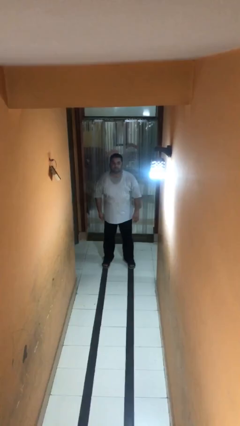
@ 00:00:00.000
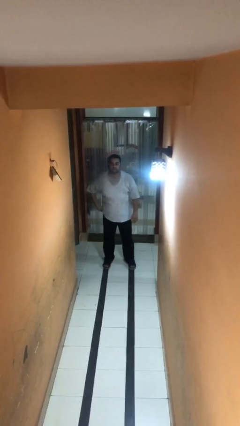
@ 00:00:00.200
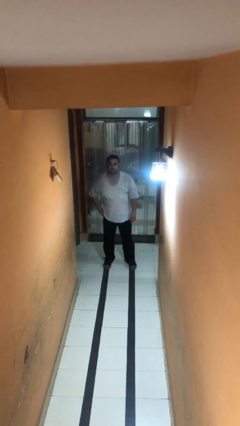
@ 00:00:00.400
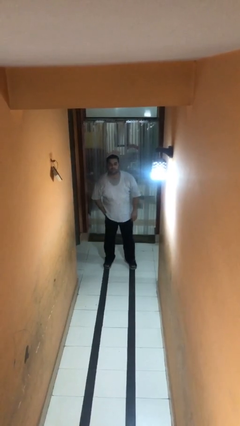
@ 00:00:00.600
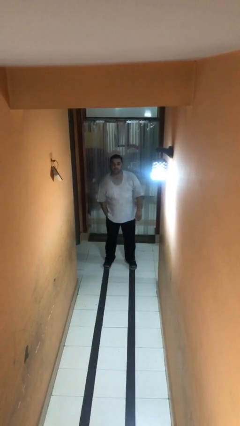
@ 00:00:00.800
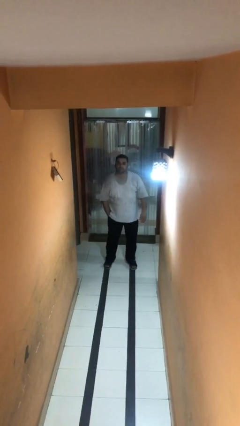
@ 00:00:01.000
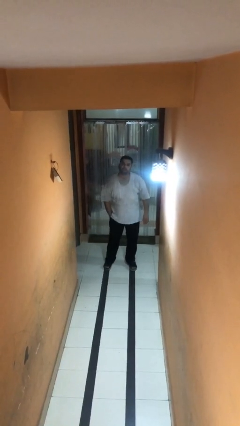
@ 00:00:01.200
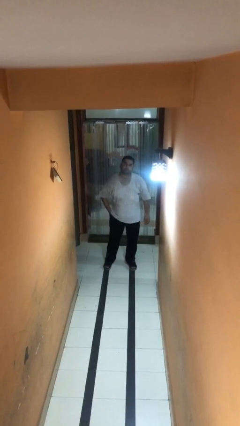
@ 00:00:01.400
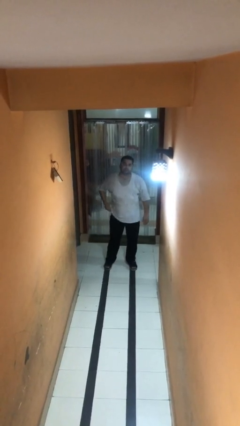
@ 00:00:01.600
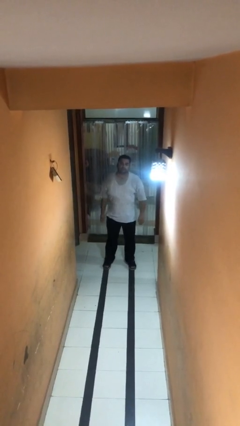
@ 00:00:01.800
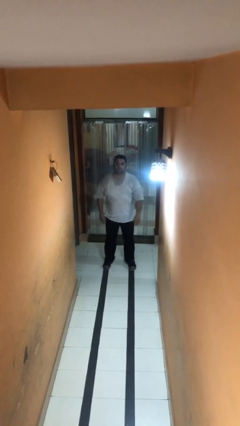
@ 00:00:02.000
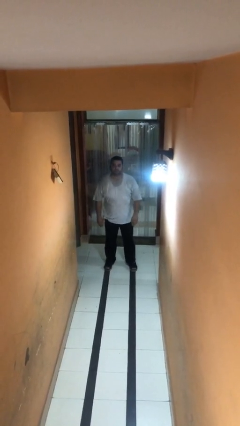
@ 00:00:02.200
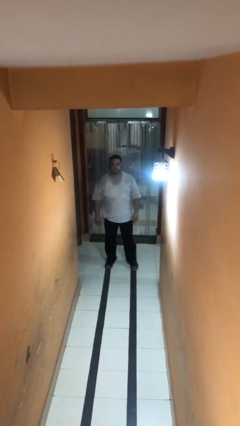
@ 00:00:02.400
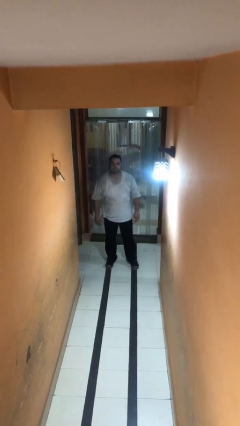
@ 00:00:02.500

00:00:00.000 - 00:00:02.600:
person puts hands in back pockets

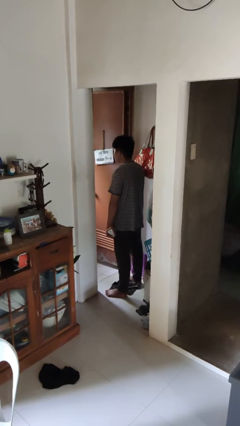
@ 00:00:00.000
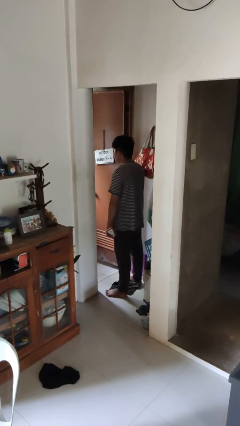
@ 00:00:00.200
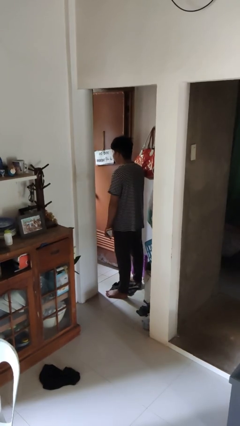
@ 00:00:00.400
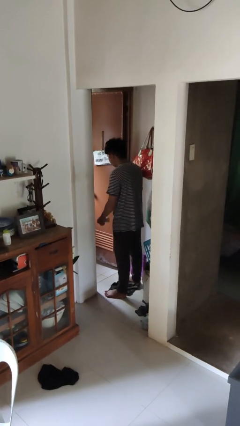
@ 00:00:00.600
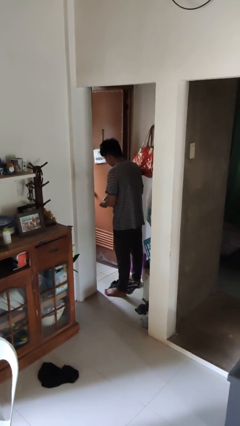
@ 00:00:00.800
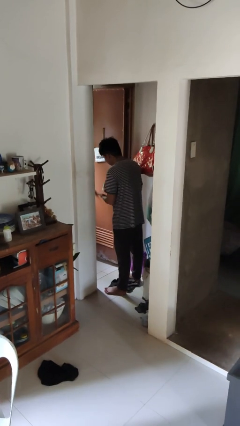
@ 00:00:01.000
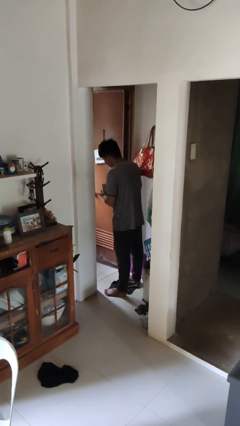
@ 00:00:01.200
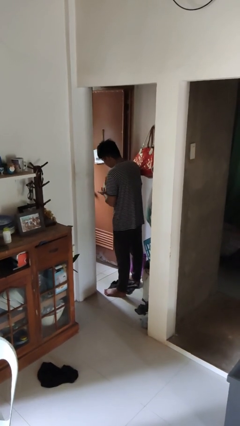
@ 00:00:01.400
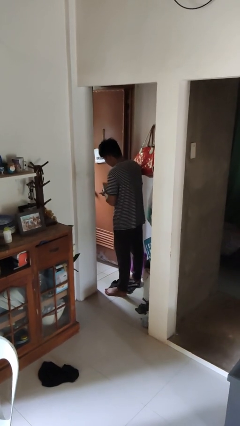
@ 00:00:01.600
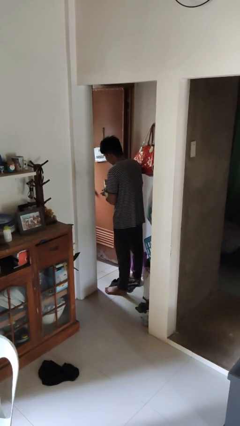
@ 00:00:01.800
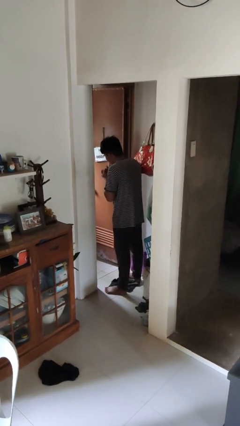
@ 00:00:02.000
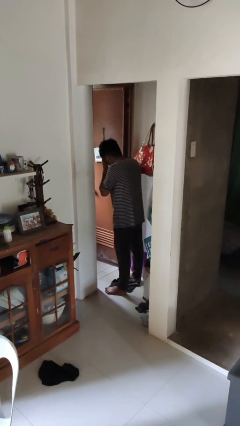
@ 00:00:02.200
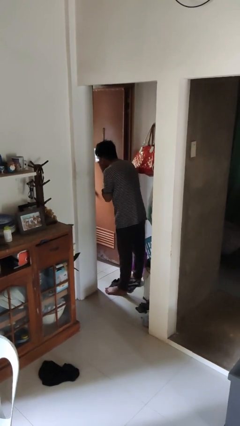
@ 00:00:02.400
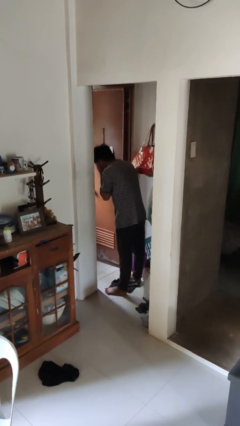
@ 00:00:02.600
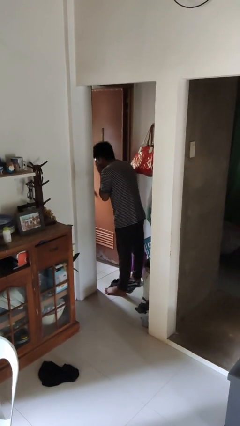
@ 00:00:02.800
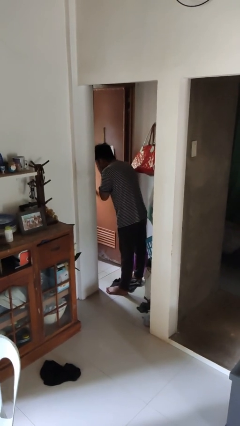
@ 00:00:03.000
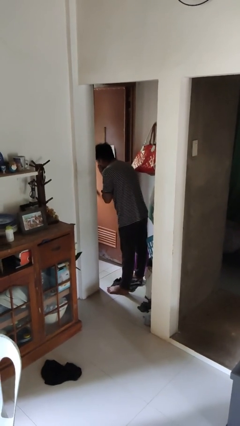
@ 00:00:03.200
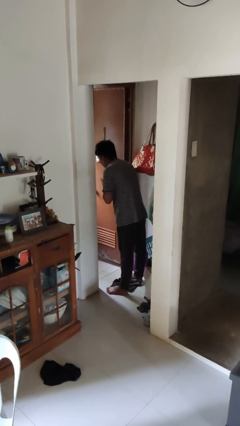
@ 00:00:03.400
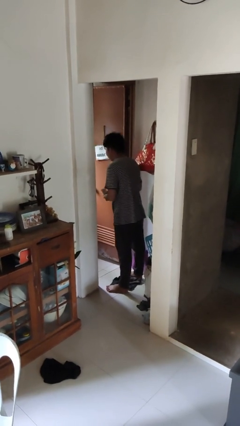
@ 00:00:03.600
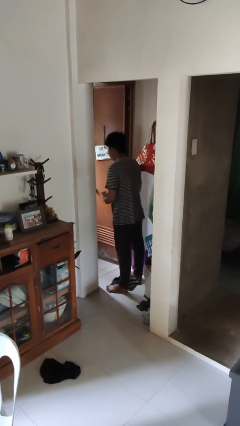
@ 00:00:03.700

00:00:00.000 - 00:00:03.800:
person applies facial moisturizer

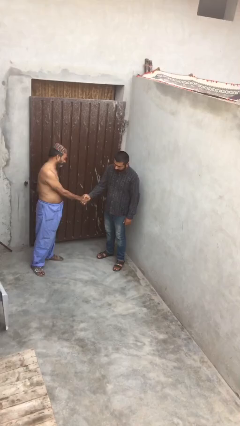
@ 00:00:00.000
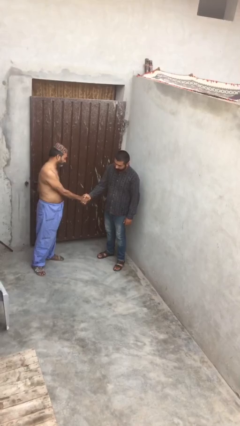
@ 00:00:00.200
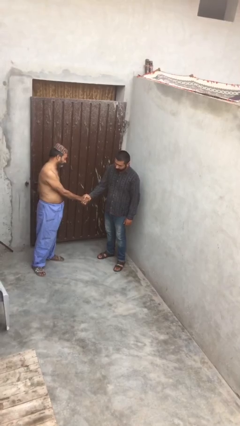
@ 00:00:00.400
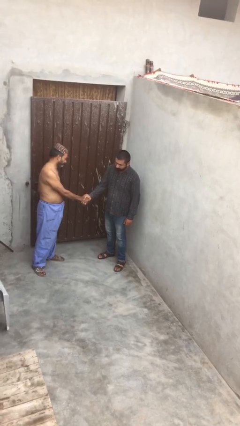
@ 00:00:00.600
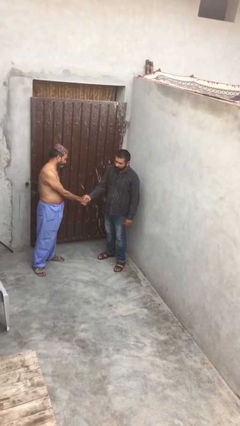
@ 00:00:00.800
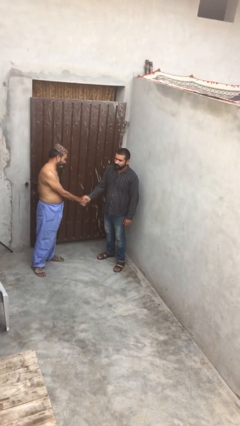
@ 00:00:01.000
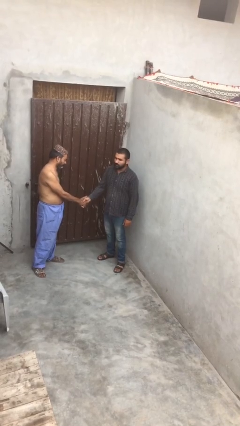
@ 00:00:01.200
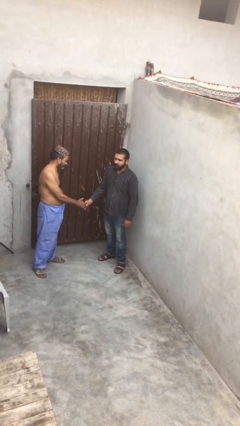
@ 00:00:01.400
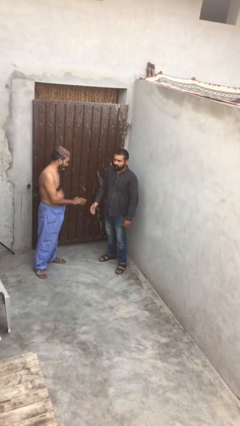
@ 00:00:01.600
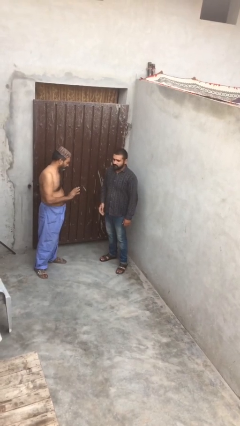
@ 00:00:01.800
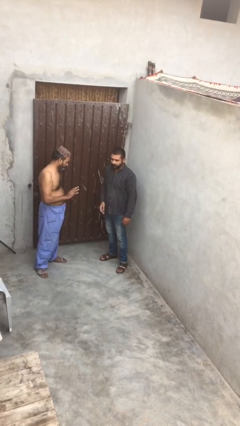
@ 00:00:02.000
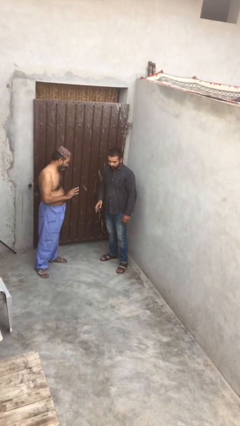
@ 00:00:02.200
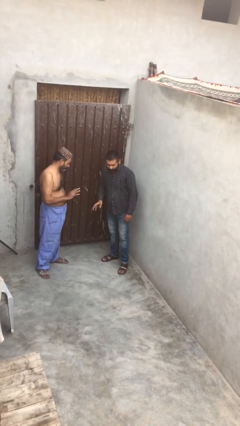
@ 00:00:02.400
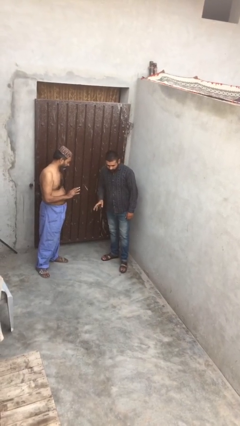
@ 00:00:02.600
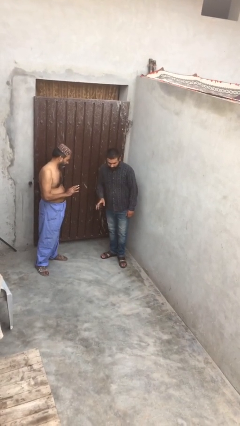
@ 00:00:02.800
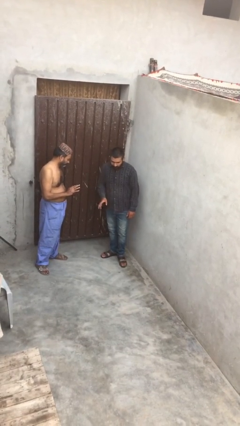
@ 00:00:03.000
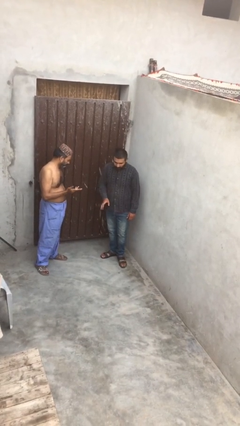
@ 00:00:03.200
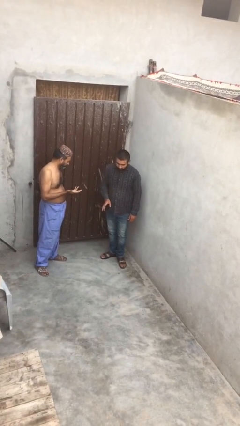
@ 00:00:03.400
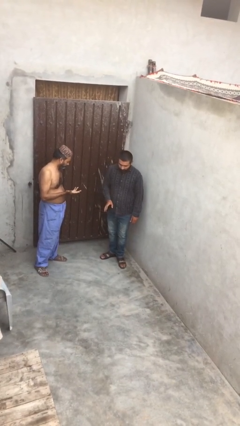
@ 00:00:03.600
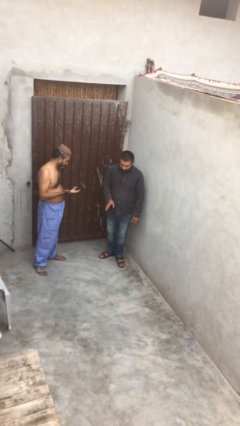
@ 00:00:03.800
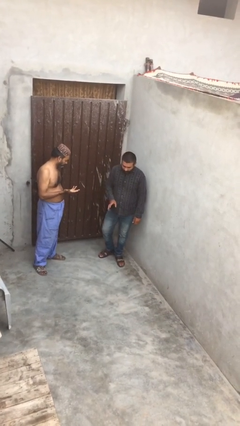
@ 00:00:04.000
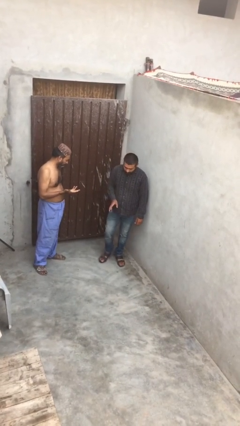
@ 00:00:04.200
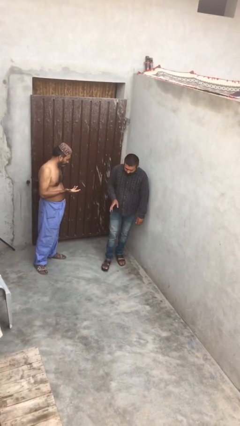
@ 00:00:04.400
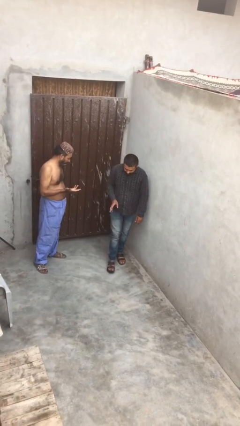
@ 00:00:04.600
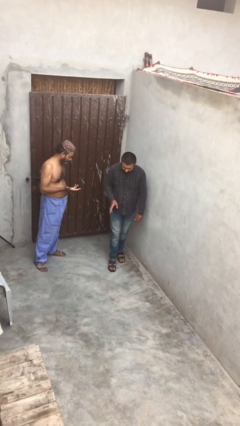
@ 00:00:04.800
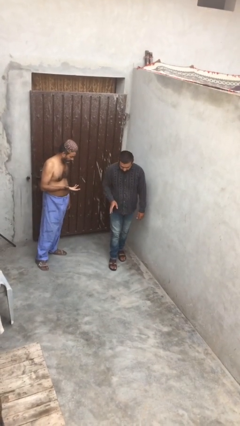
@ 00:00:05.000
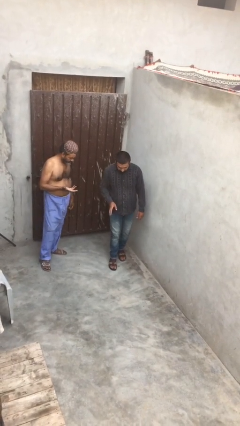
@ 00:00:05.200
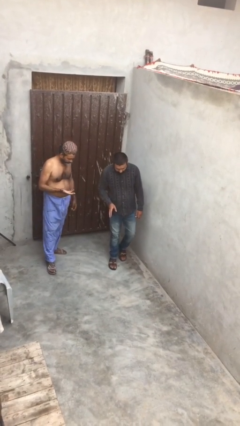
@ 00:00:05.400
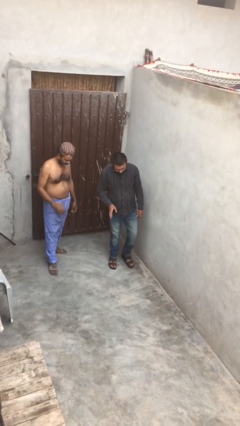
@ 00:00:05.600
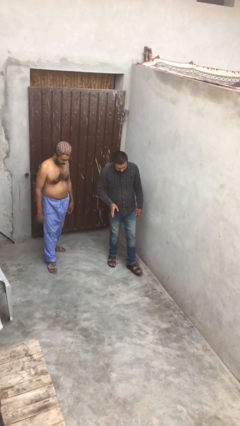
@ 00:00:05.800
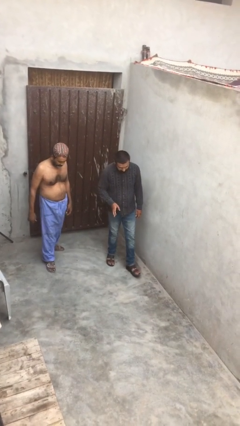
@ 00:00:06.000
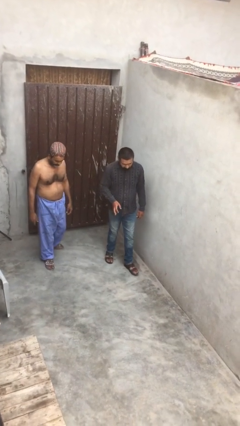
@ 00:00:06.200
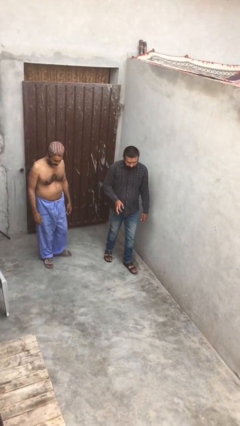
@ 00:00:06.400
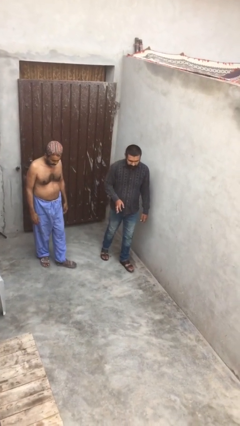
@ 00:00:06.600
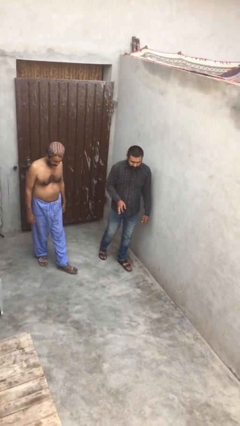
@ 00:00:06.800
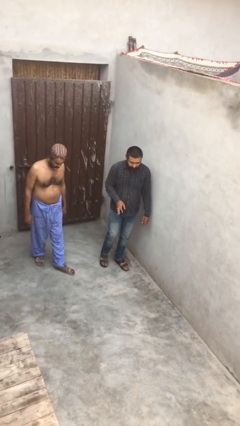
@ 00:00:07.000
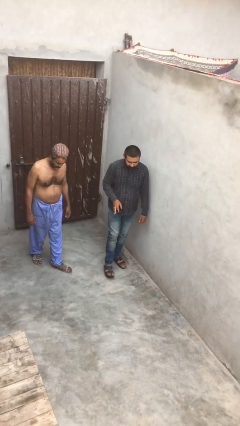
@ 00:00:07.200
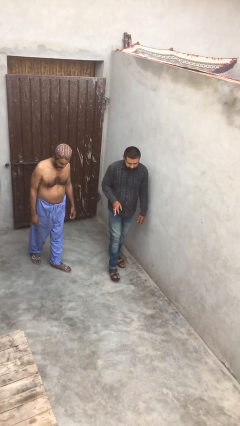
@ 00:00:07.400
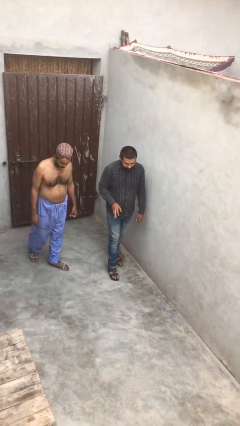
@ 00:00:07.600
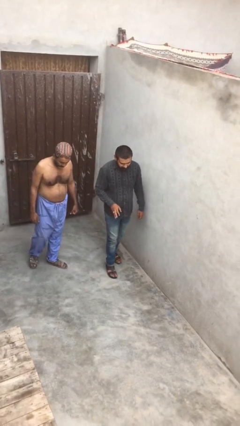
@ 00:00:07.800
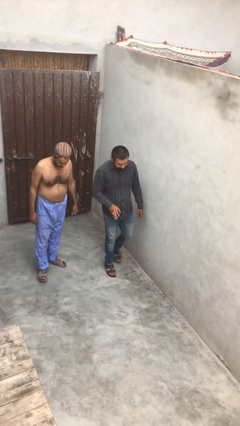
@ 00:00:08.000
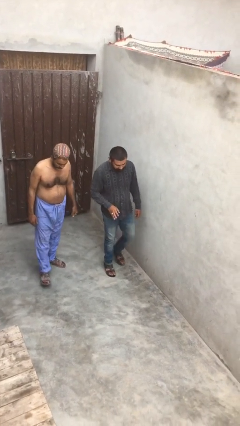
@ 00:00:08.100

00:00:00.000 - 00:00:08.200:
person talks to person

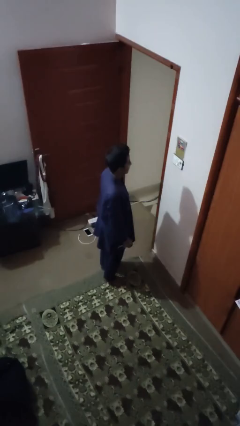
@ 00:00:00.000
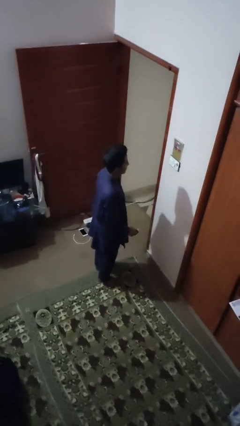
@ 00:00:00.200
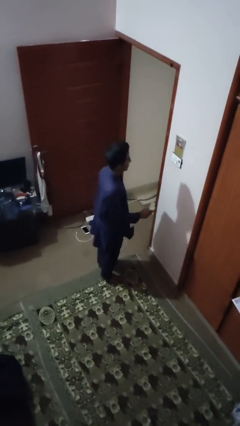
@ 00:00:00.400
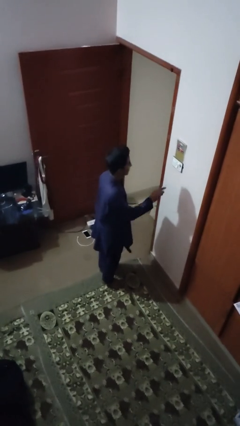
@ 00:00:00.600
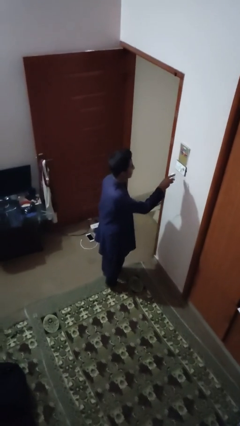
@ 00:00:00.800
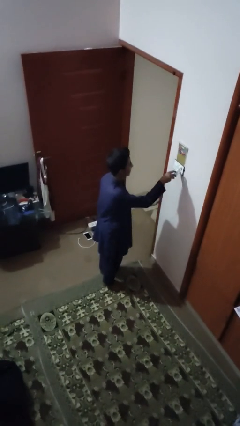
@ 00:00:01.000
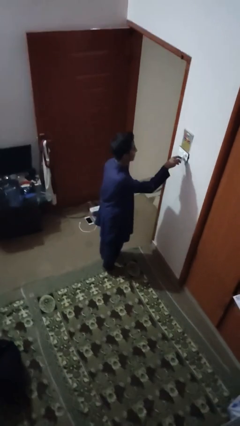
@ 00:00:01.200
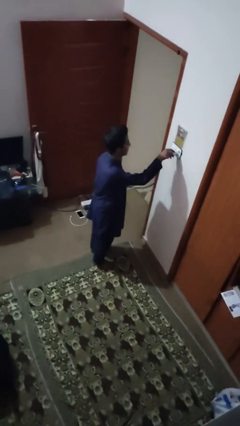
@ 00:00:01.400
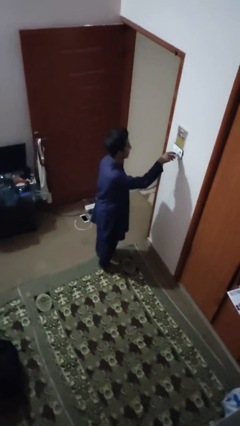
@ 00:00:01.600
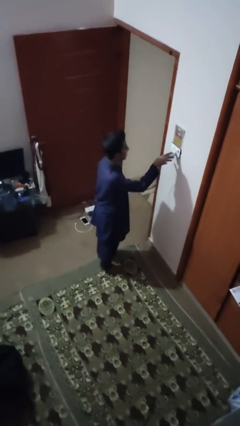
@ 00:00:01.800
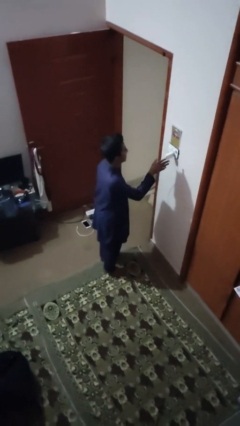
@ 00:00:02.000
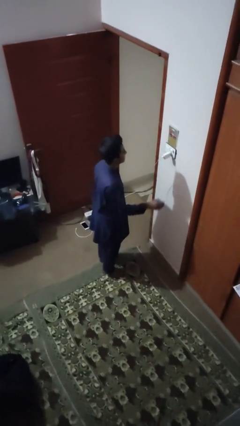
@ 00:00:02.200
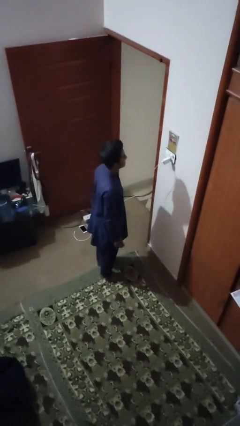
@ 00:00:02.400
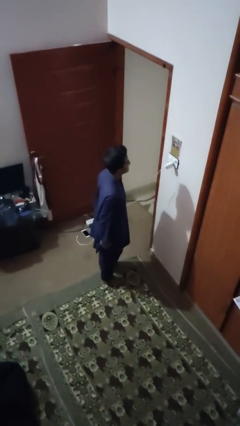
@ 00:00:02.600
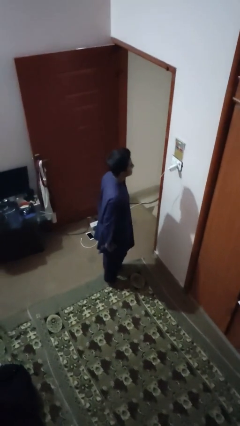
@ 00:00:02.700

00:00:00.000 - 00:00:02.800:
person plugs into electrical socket
